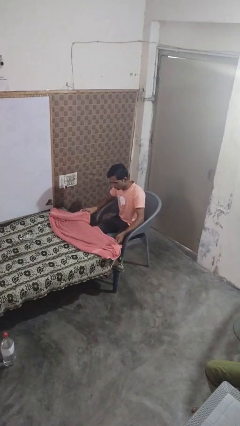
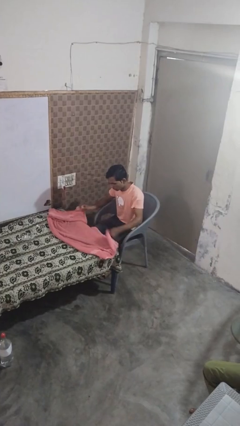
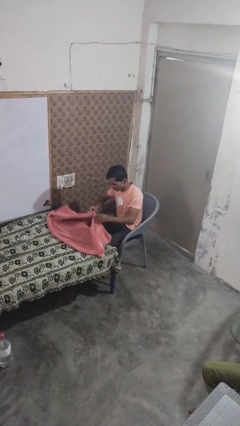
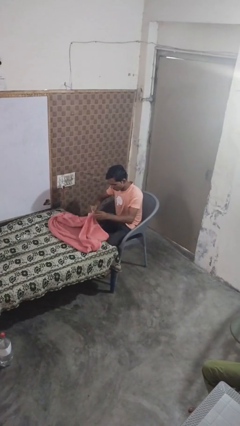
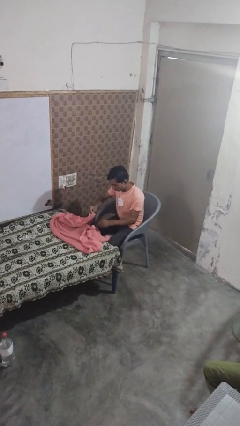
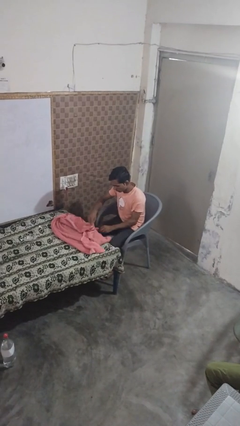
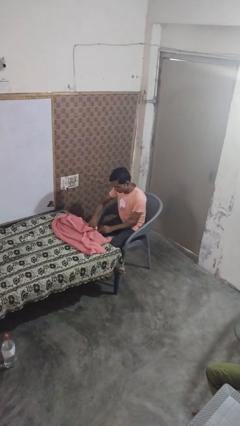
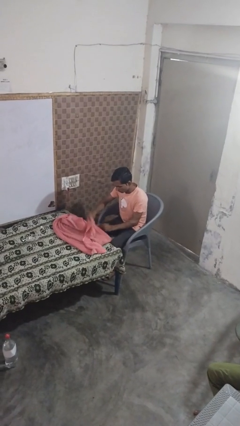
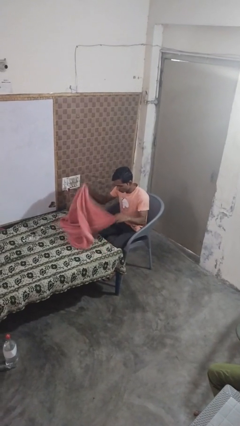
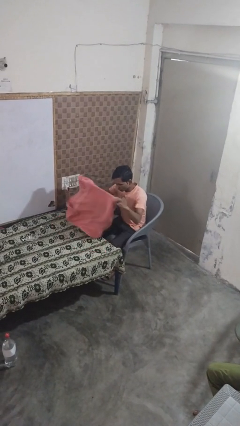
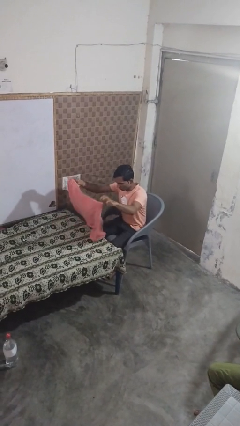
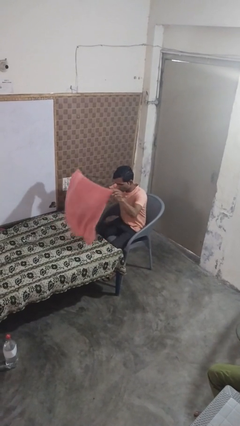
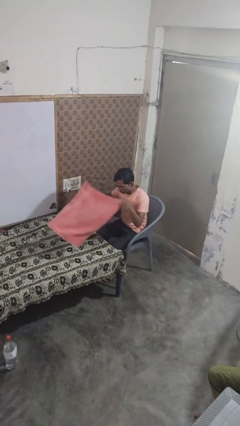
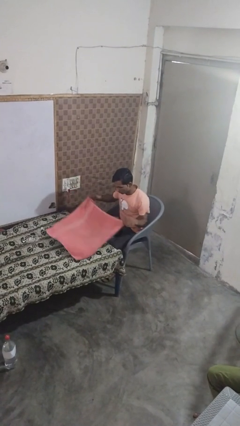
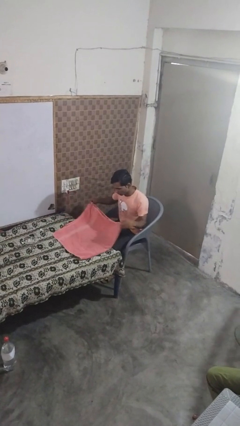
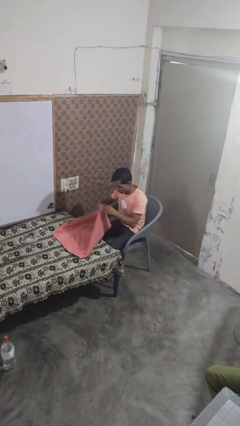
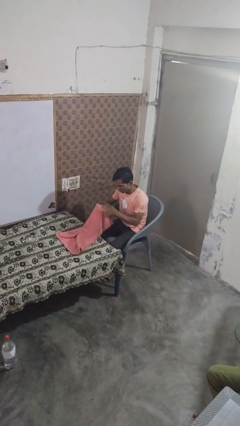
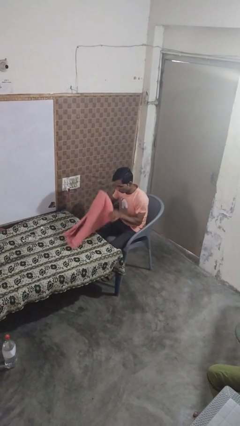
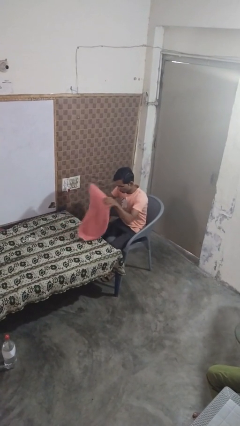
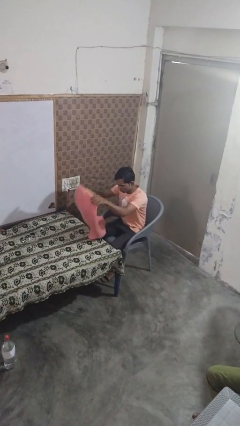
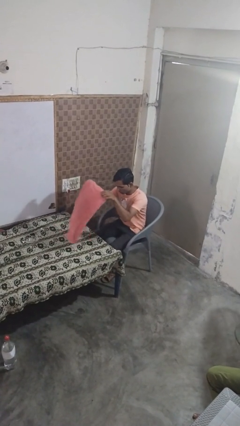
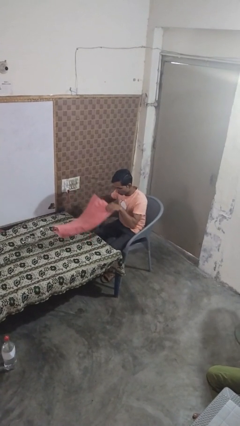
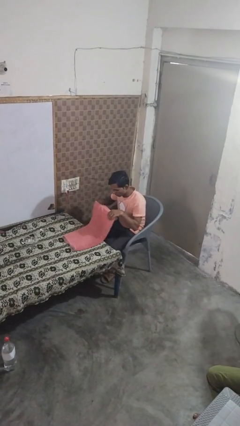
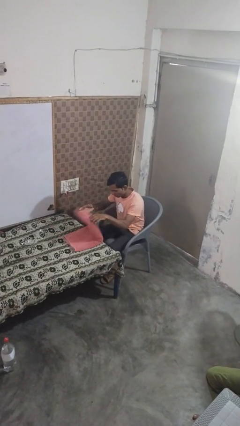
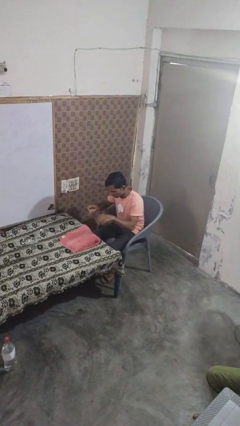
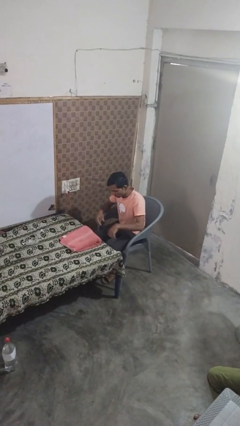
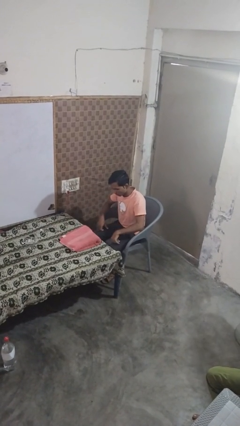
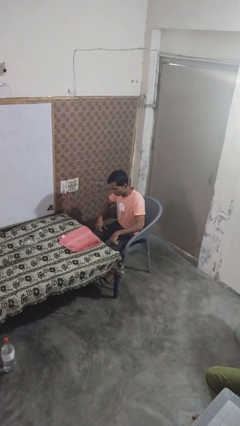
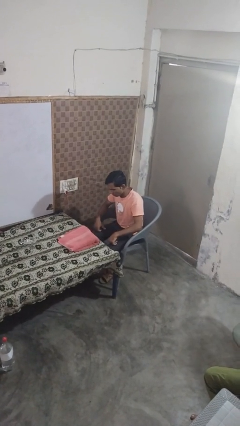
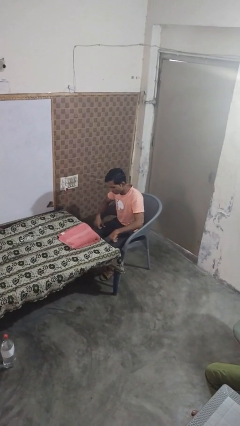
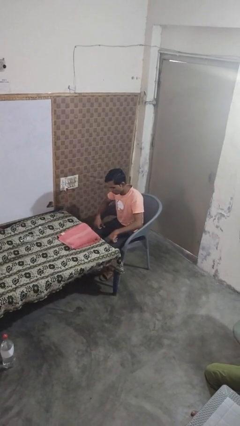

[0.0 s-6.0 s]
person folds towel

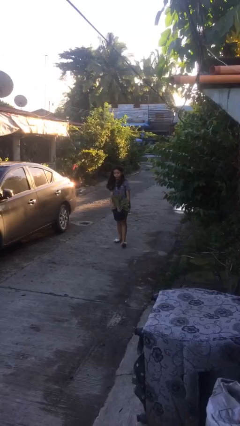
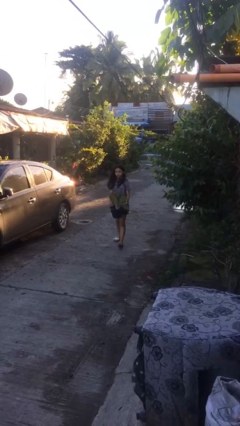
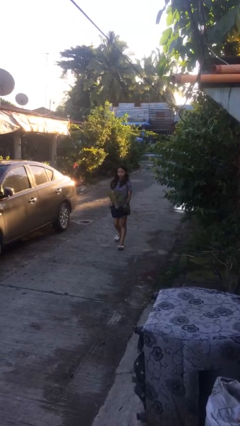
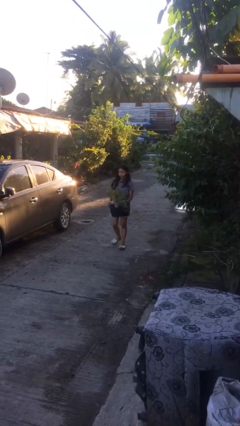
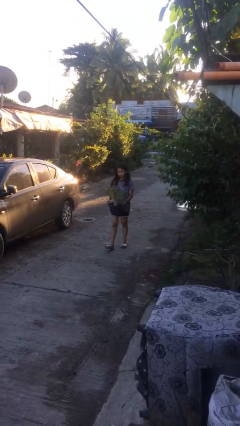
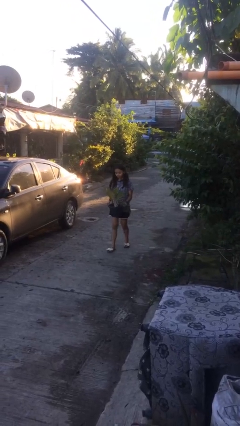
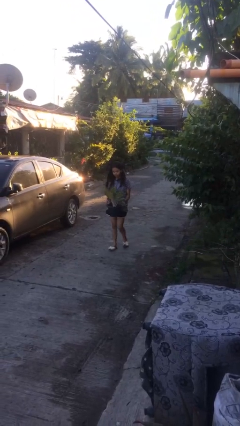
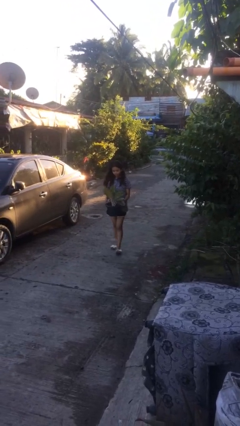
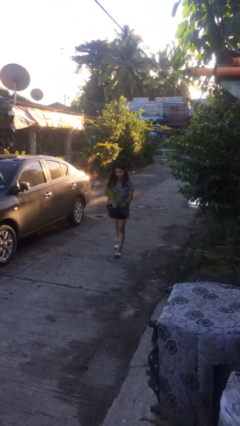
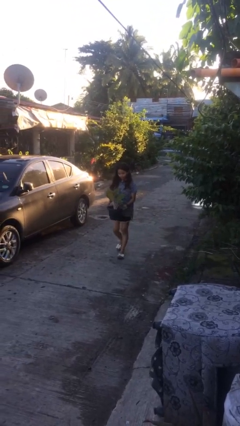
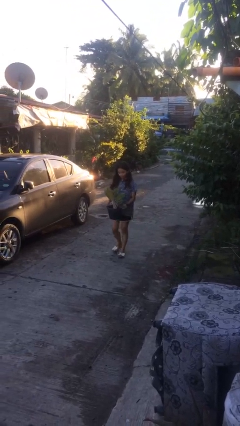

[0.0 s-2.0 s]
person carries heavy object

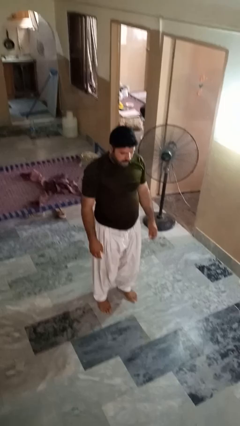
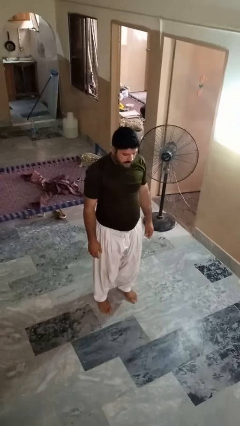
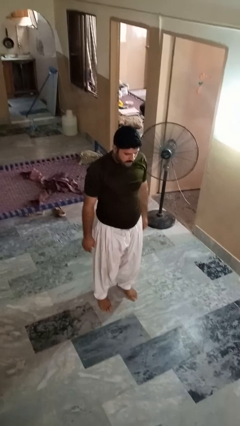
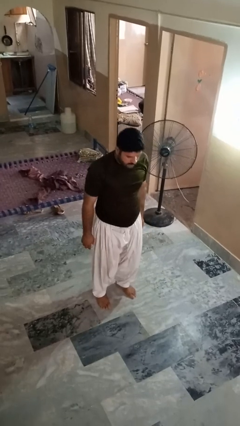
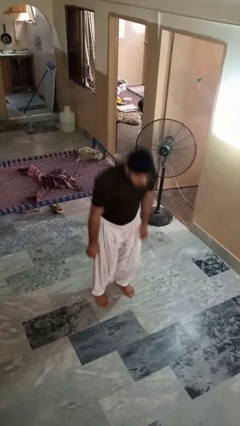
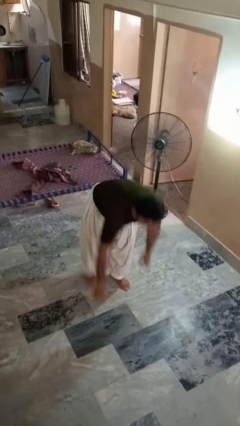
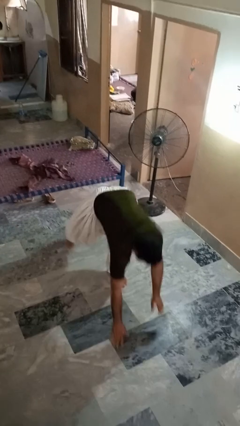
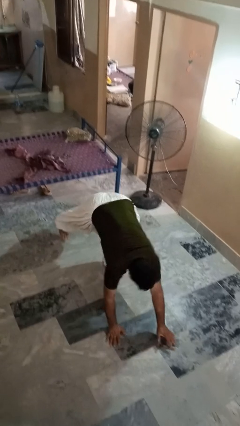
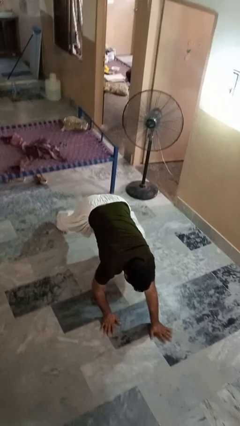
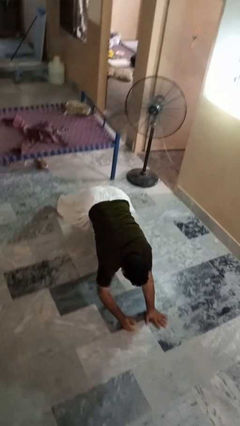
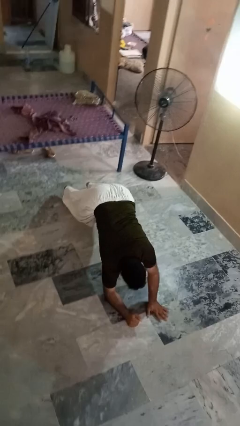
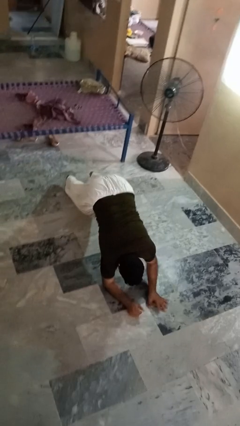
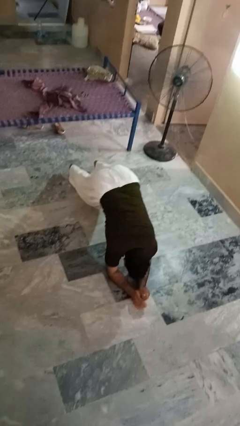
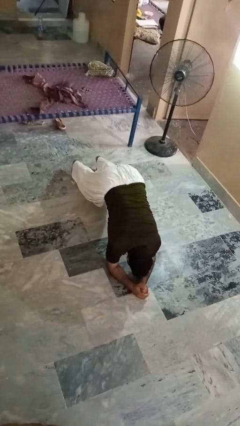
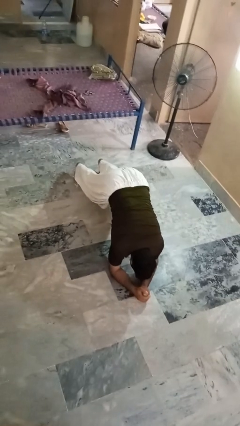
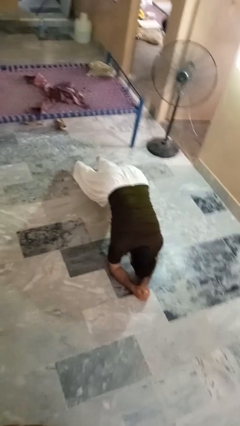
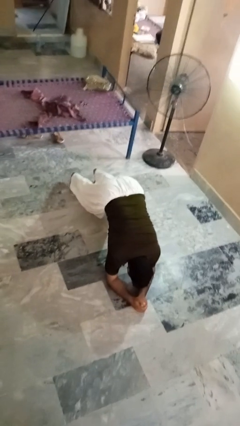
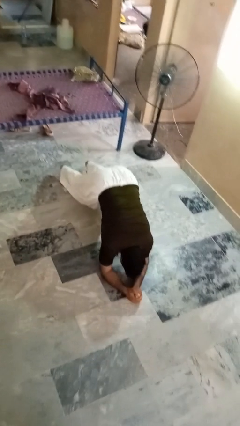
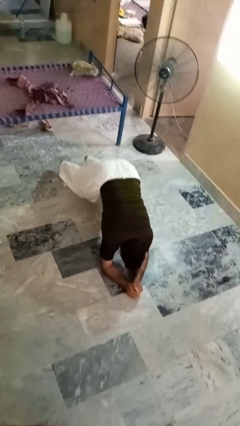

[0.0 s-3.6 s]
person exercises with plank

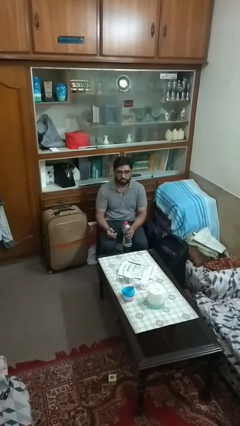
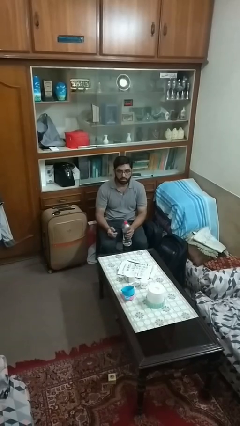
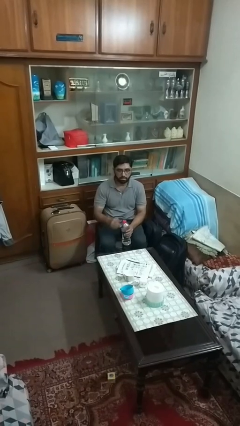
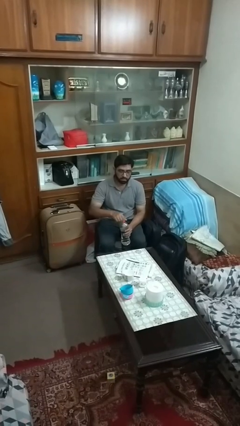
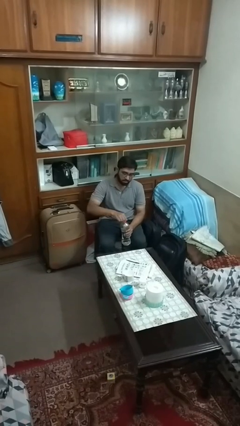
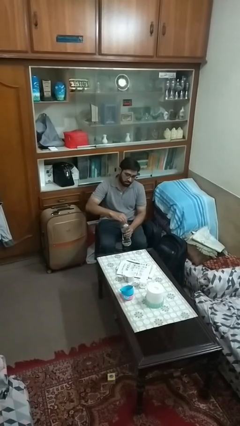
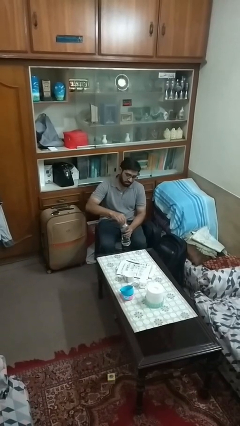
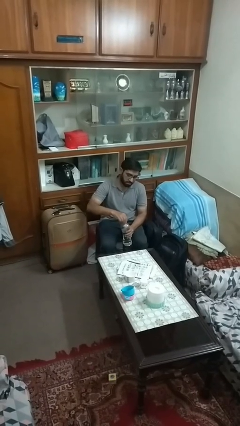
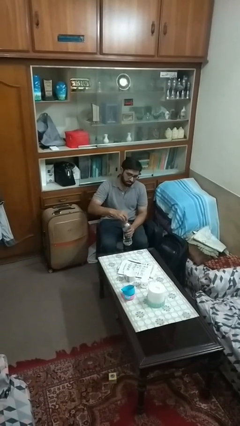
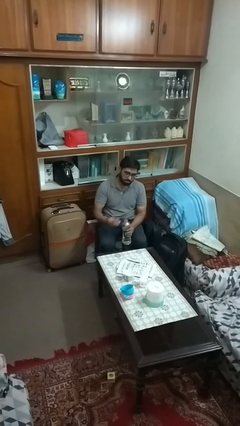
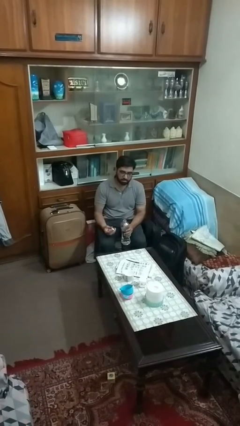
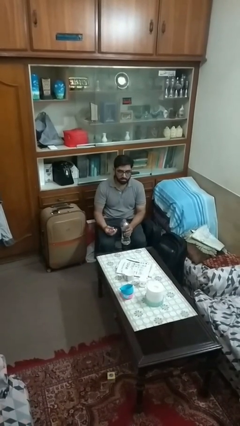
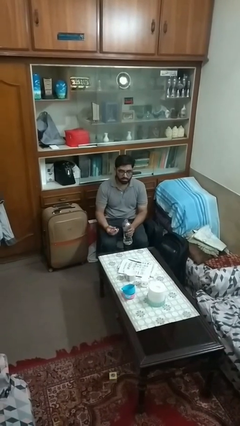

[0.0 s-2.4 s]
person unscrews lid from bottle

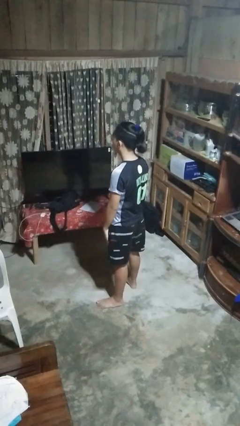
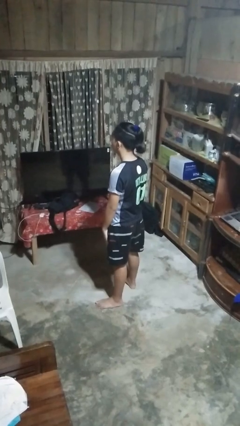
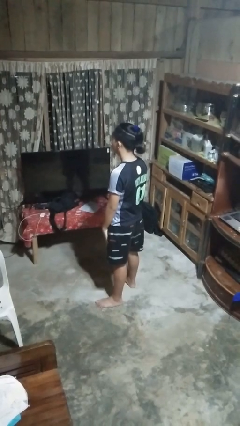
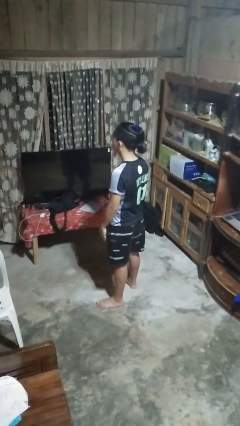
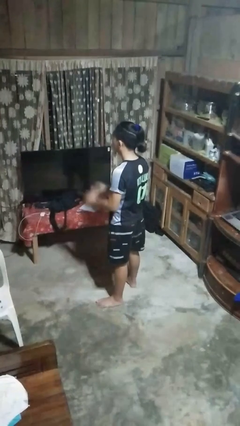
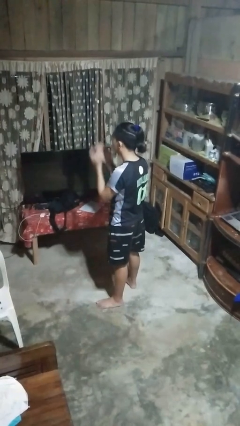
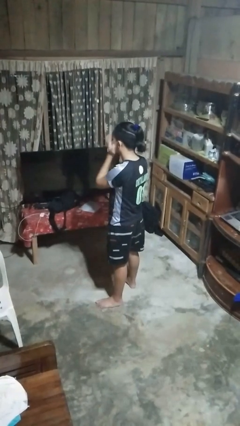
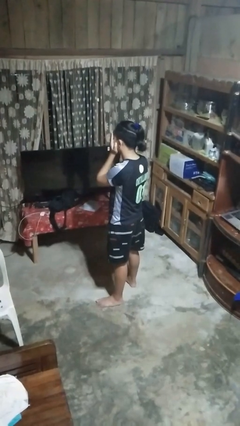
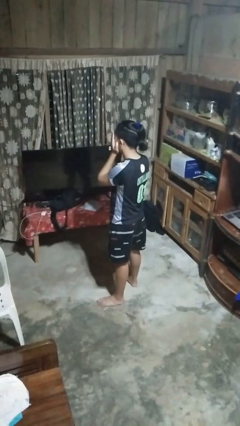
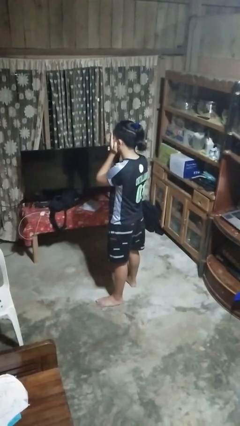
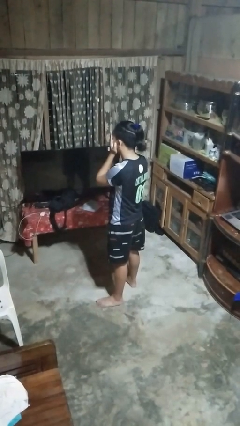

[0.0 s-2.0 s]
person covers face with hands

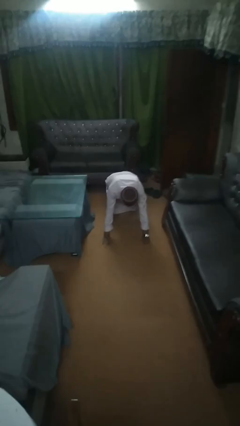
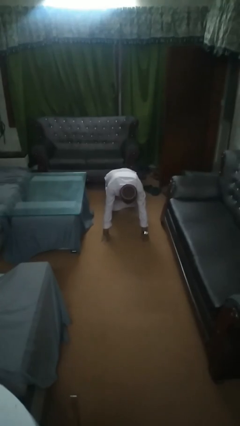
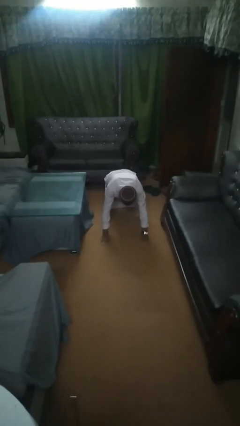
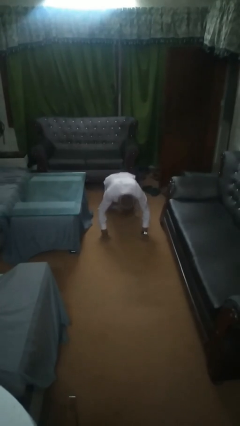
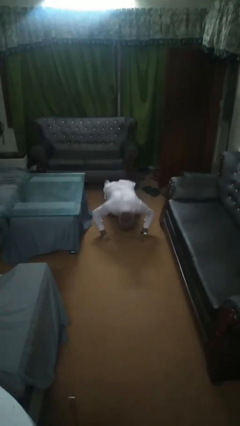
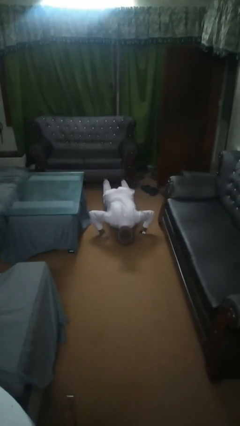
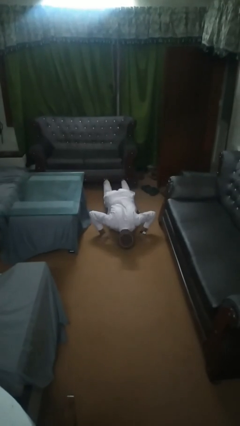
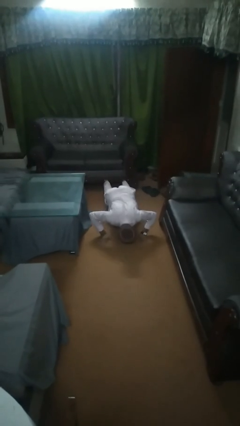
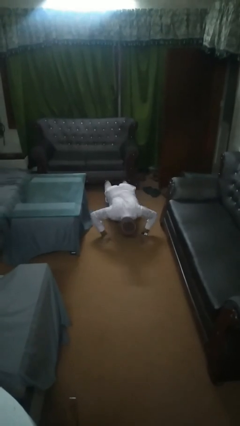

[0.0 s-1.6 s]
person exercises with pushup
